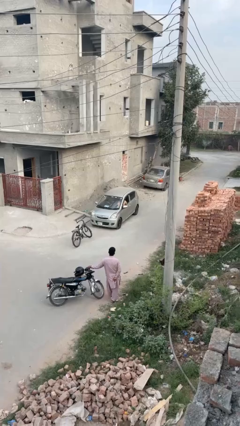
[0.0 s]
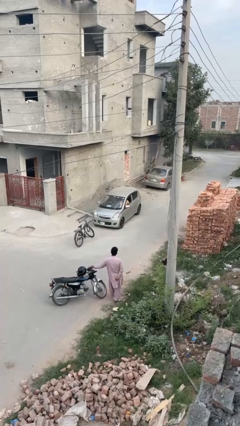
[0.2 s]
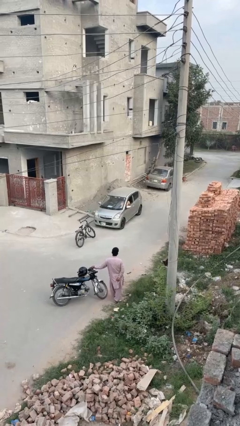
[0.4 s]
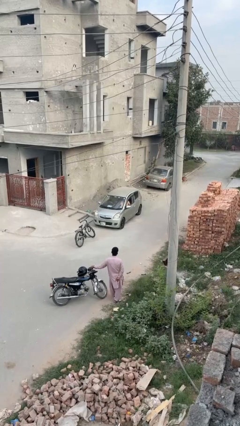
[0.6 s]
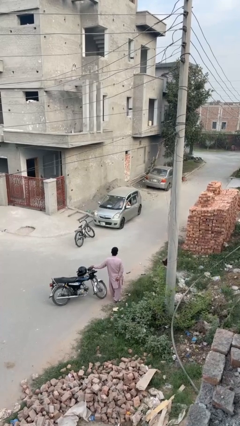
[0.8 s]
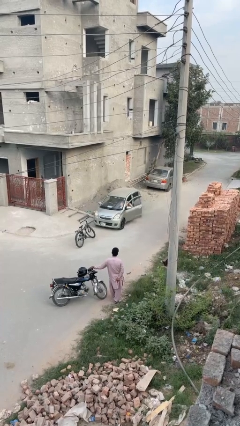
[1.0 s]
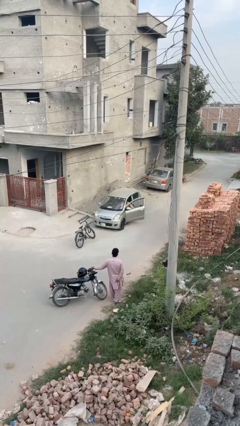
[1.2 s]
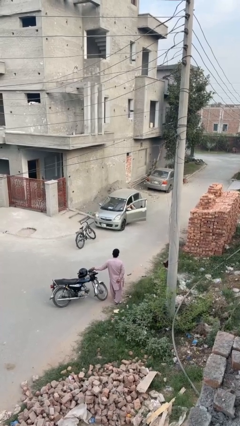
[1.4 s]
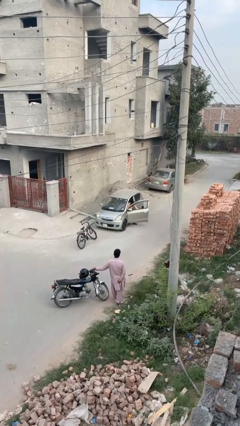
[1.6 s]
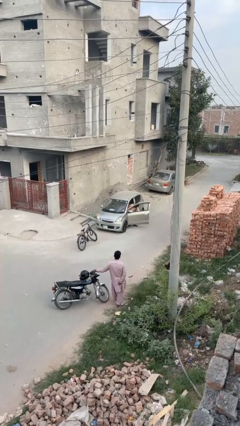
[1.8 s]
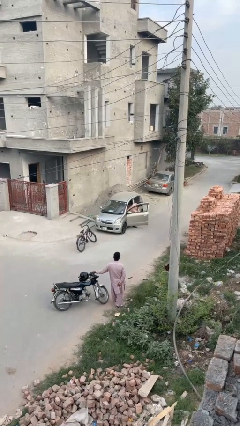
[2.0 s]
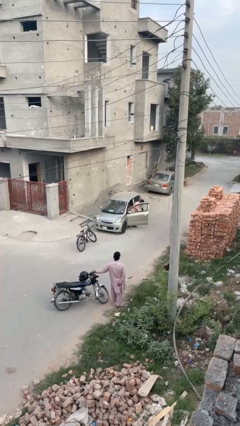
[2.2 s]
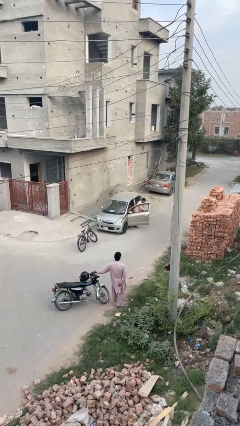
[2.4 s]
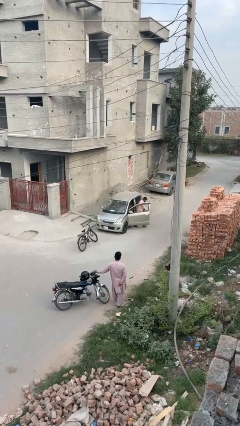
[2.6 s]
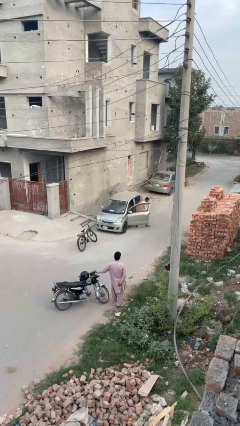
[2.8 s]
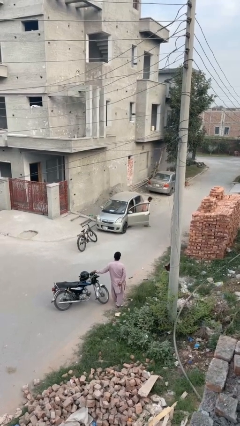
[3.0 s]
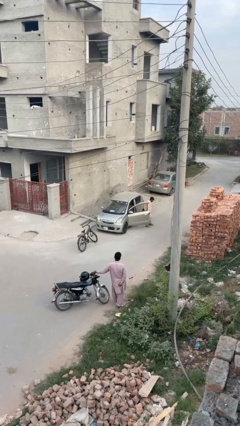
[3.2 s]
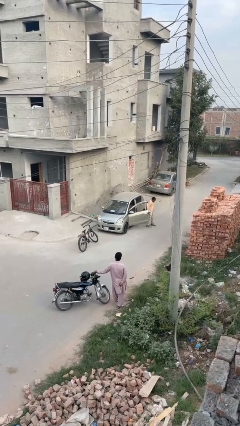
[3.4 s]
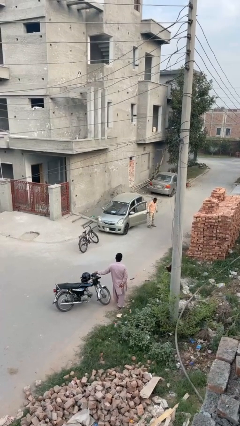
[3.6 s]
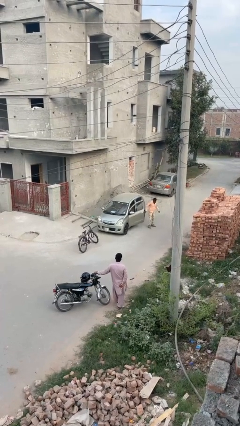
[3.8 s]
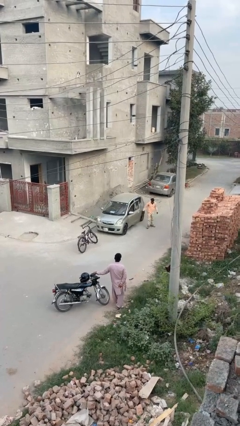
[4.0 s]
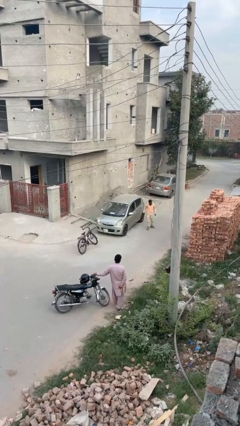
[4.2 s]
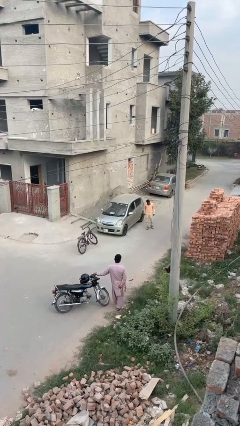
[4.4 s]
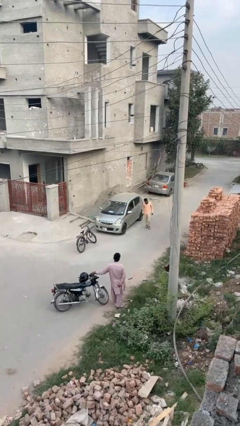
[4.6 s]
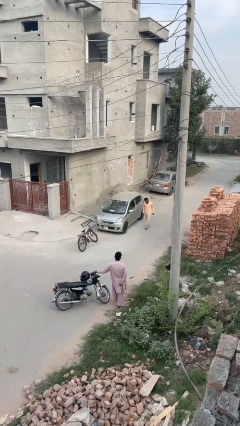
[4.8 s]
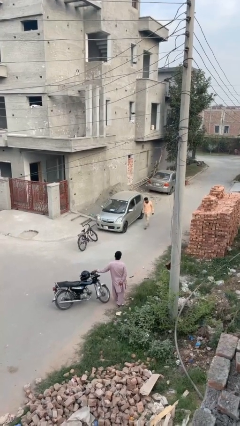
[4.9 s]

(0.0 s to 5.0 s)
car drops off person

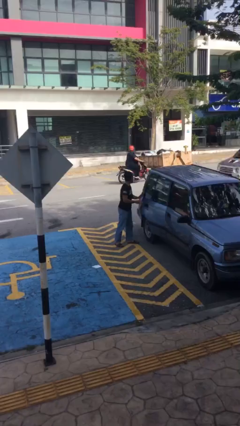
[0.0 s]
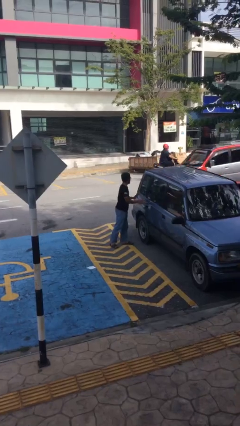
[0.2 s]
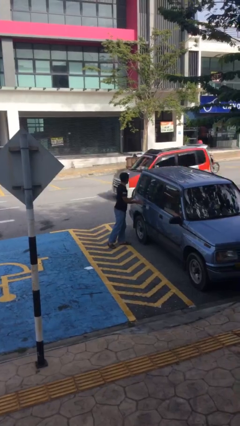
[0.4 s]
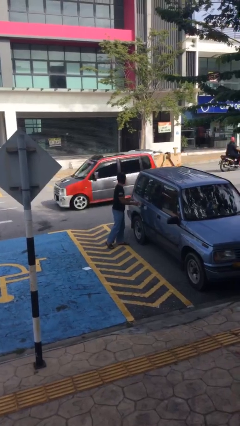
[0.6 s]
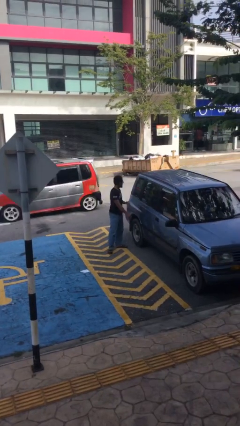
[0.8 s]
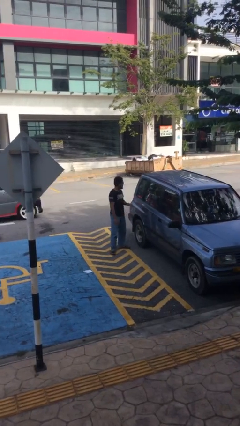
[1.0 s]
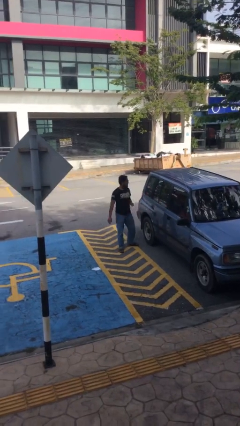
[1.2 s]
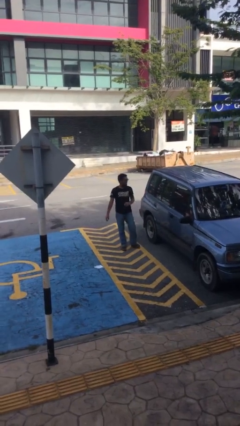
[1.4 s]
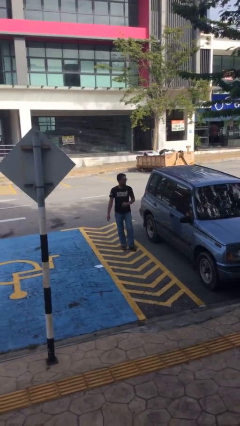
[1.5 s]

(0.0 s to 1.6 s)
person closes car door

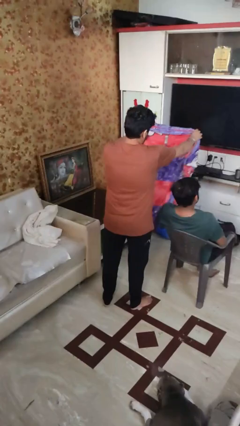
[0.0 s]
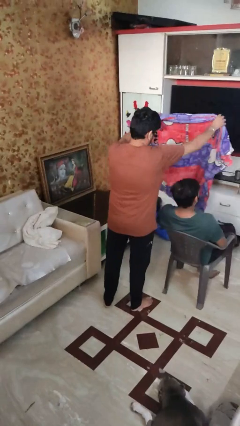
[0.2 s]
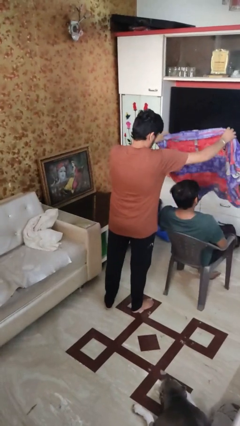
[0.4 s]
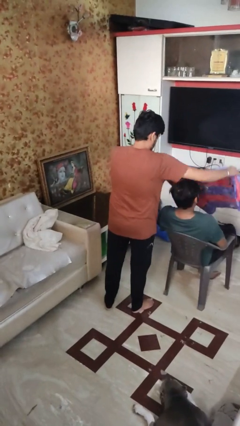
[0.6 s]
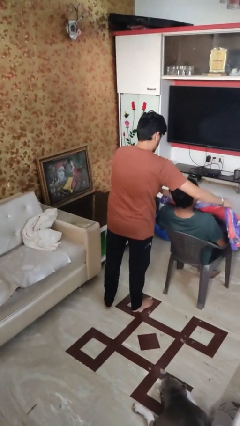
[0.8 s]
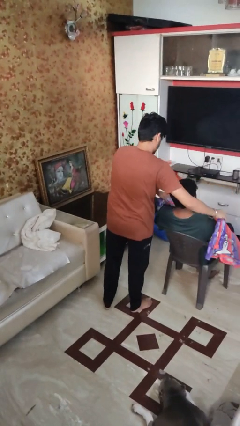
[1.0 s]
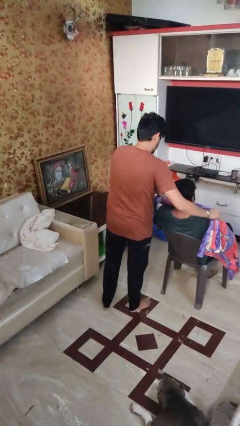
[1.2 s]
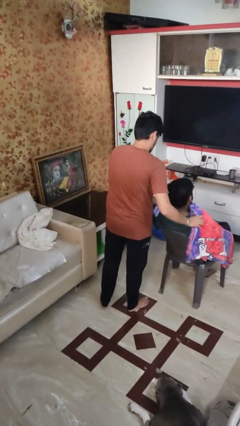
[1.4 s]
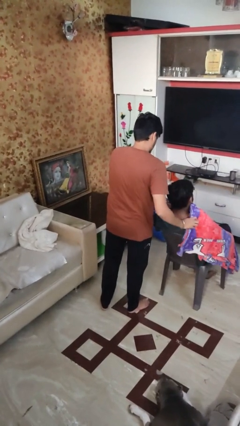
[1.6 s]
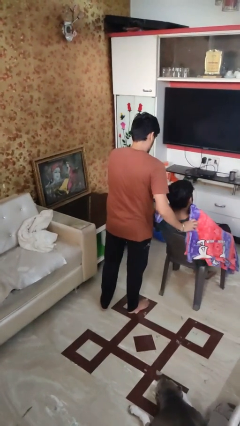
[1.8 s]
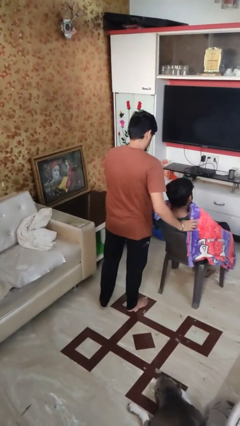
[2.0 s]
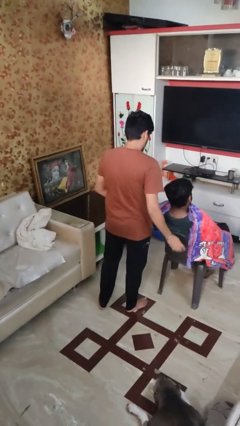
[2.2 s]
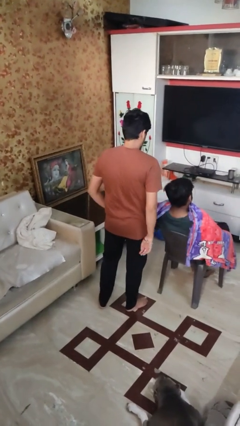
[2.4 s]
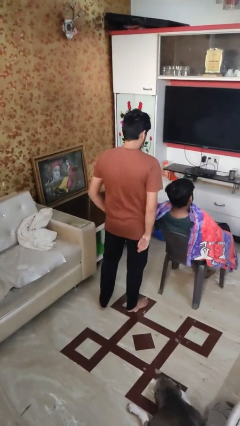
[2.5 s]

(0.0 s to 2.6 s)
person covers friend with blanket

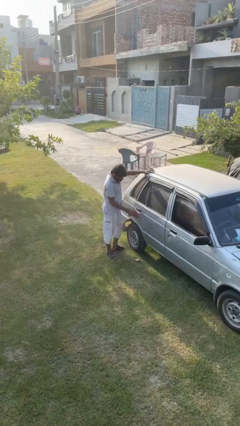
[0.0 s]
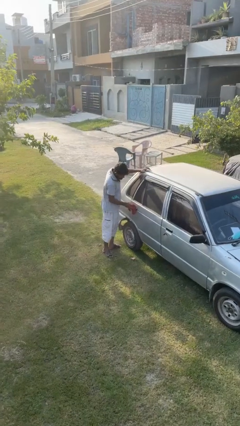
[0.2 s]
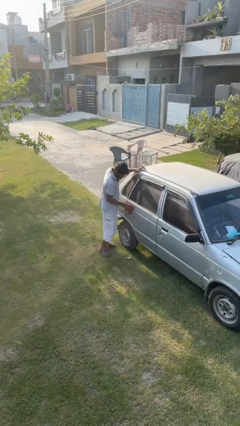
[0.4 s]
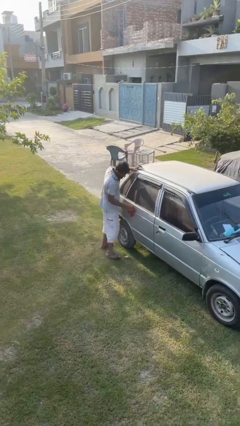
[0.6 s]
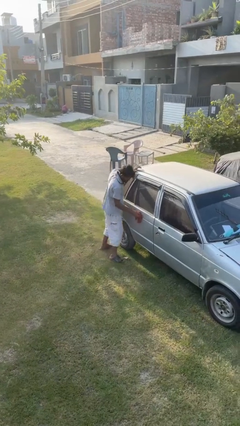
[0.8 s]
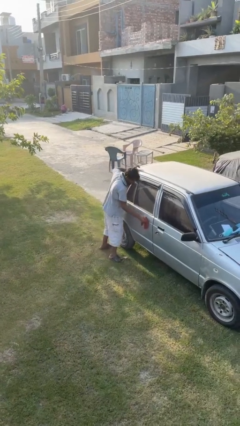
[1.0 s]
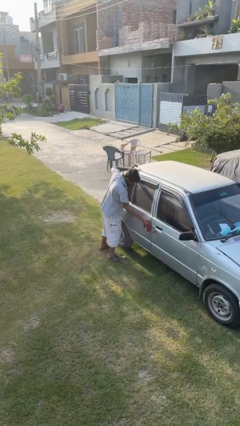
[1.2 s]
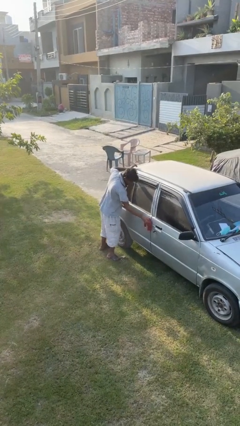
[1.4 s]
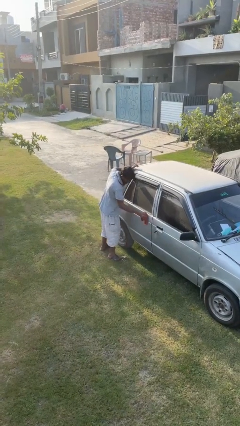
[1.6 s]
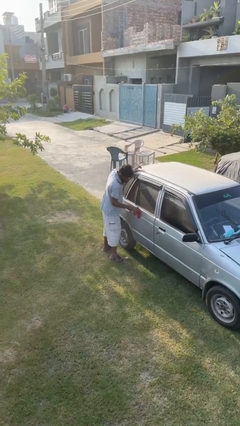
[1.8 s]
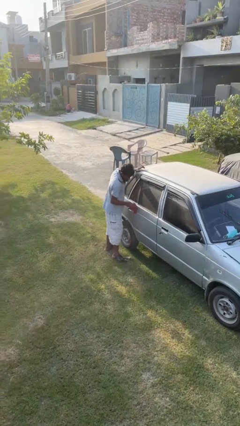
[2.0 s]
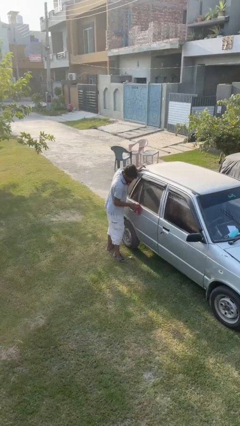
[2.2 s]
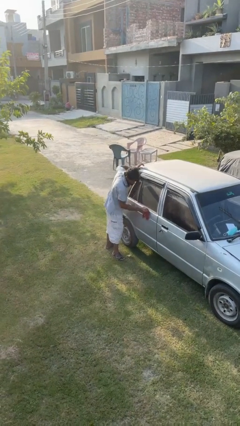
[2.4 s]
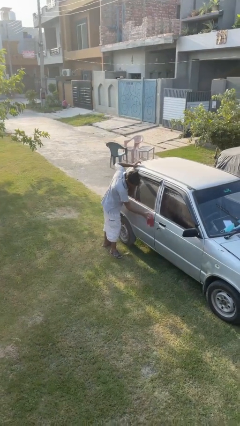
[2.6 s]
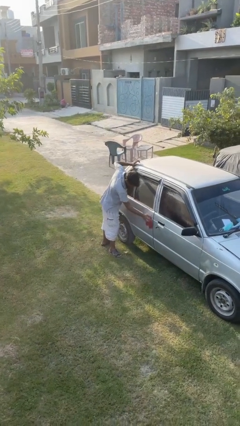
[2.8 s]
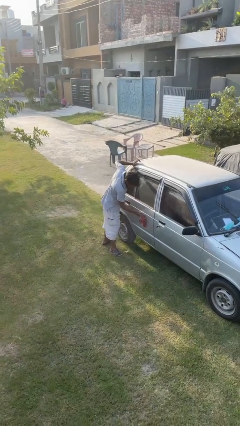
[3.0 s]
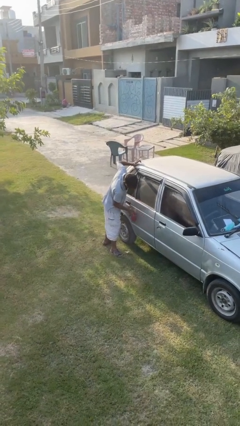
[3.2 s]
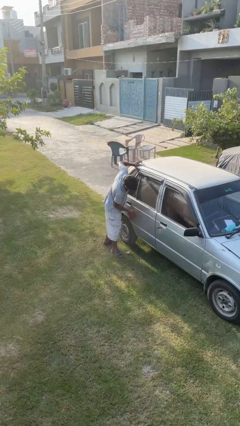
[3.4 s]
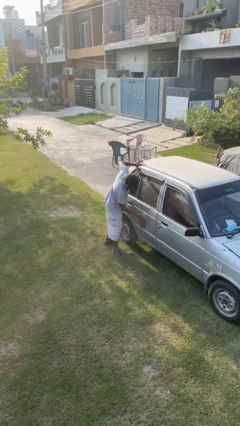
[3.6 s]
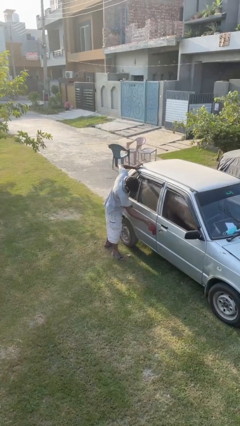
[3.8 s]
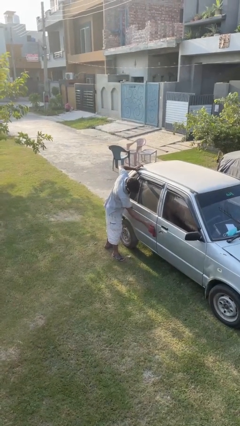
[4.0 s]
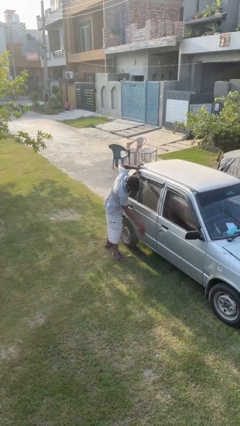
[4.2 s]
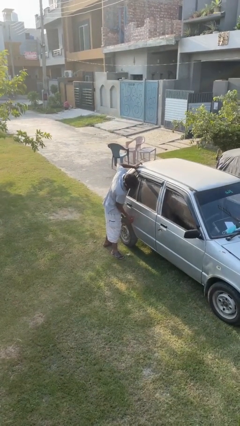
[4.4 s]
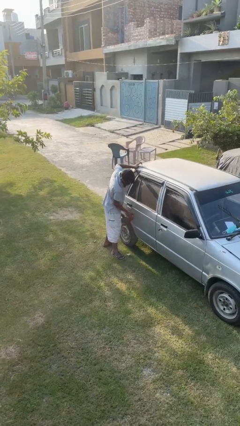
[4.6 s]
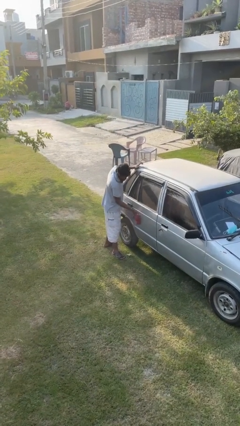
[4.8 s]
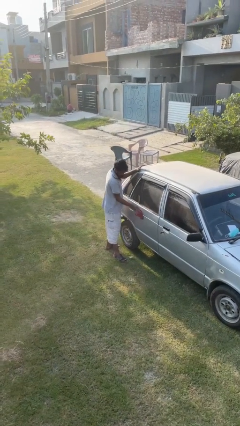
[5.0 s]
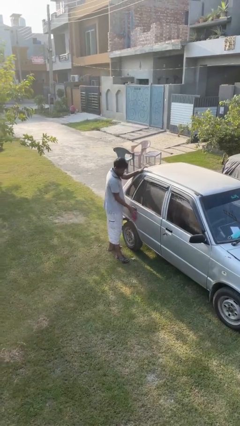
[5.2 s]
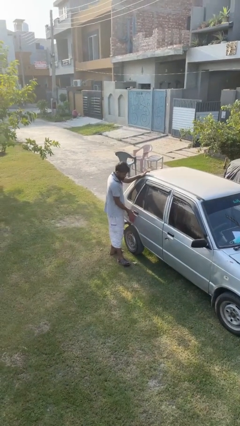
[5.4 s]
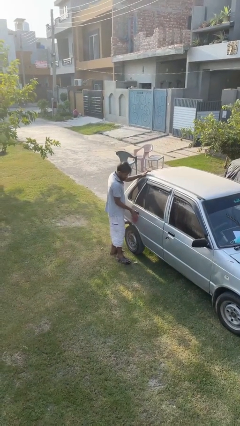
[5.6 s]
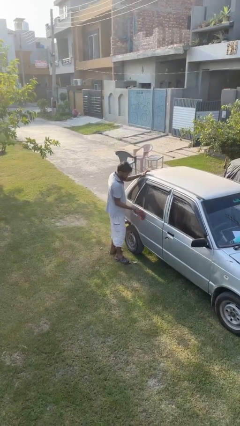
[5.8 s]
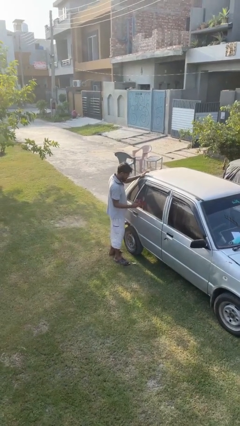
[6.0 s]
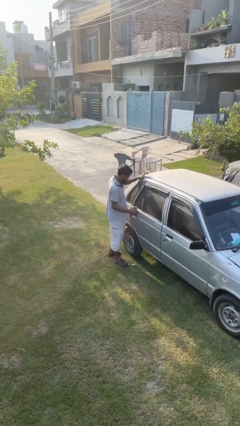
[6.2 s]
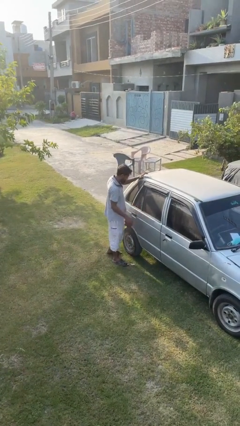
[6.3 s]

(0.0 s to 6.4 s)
person polishes car with rag

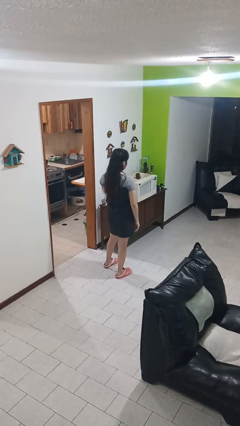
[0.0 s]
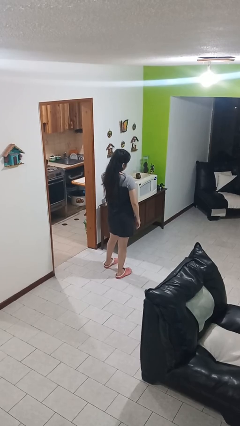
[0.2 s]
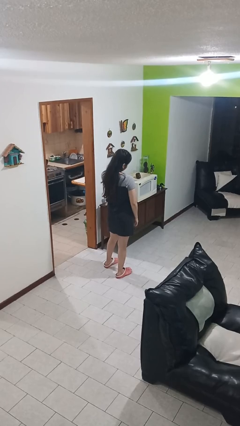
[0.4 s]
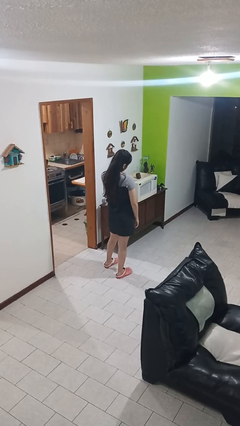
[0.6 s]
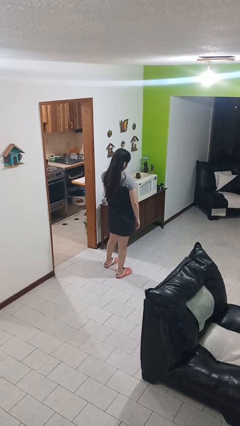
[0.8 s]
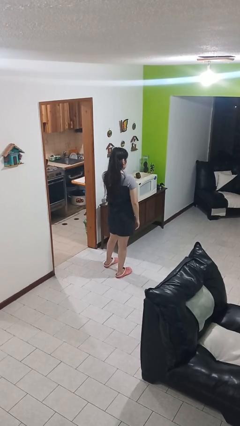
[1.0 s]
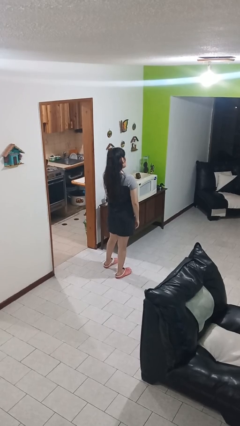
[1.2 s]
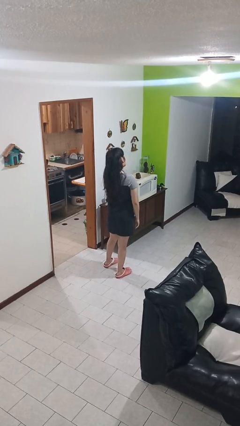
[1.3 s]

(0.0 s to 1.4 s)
person rubs neck

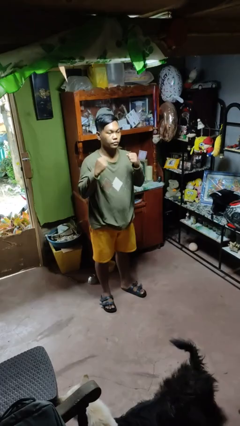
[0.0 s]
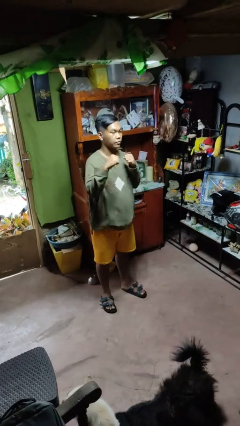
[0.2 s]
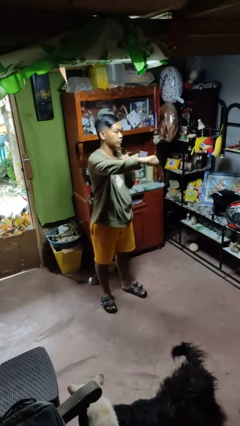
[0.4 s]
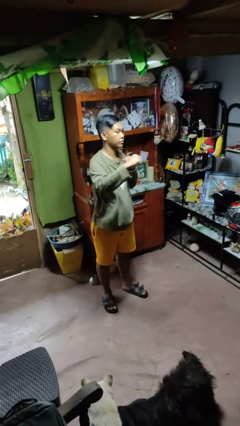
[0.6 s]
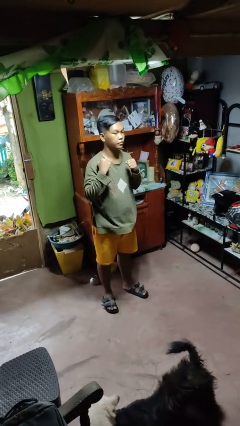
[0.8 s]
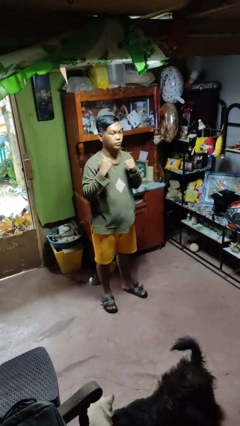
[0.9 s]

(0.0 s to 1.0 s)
person punches
